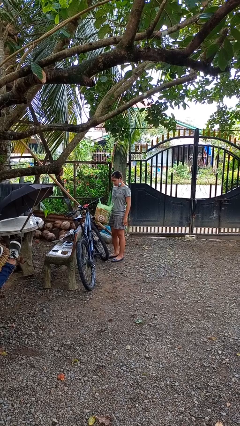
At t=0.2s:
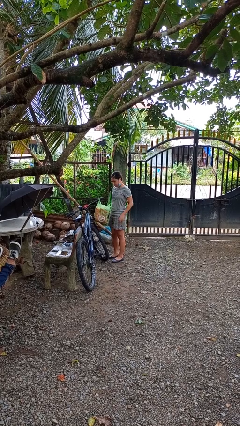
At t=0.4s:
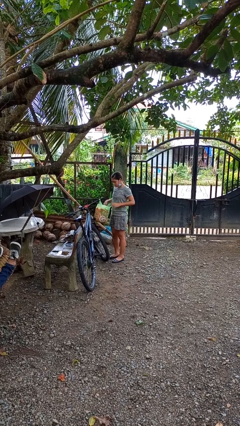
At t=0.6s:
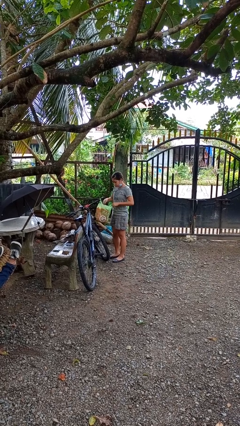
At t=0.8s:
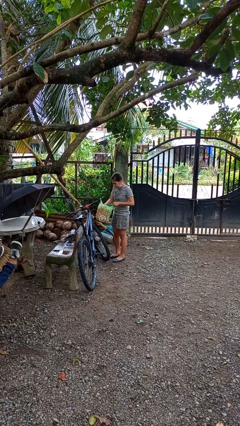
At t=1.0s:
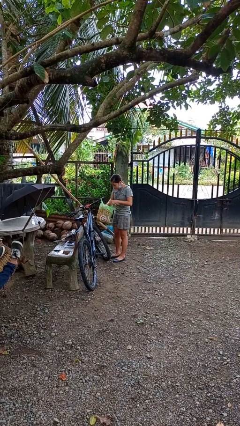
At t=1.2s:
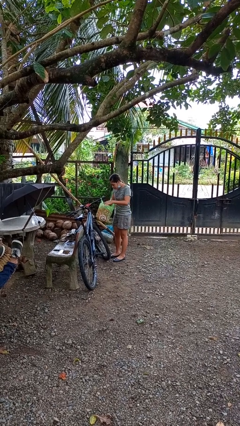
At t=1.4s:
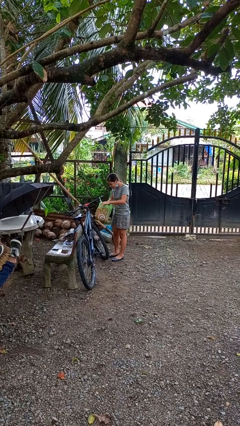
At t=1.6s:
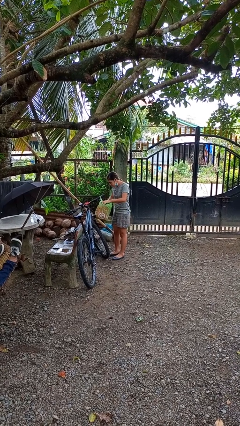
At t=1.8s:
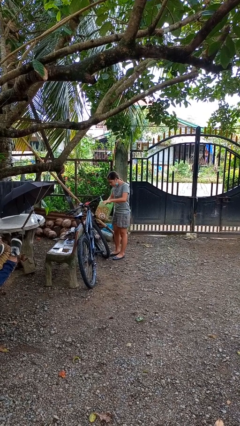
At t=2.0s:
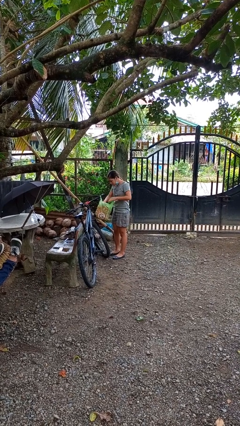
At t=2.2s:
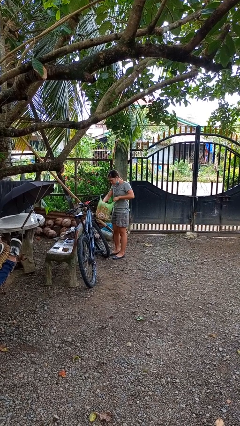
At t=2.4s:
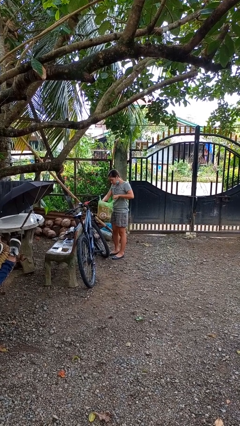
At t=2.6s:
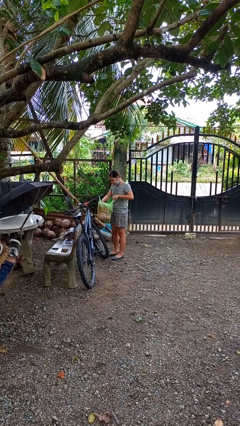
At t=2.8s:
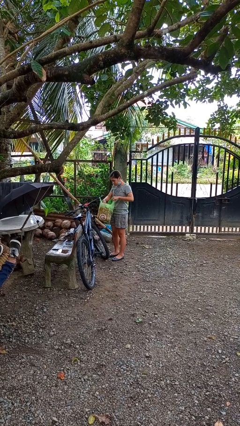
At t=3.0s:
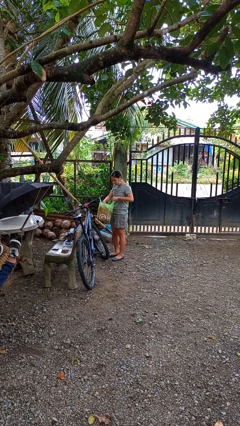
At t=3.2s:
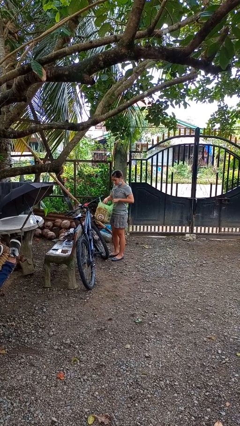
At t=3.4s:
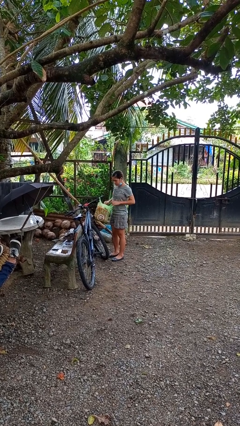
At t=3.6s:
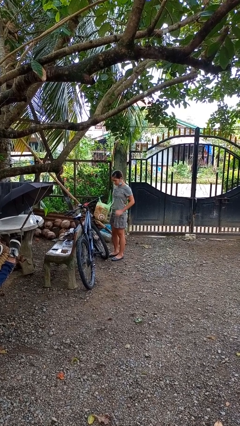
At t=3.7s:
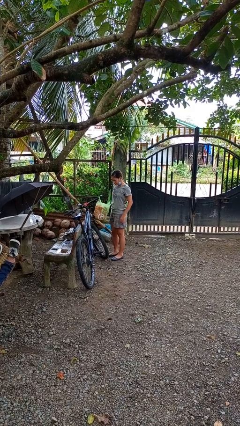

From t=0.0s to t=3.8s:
person searches in bag

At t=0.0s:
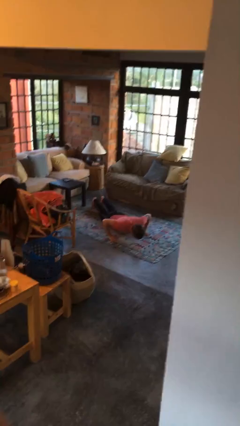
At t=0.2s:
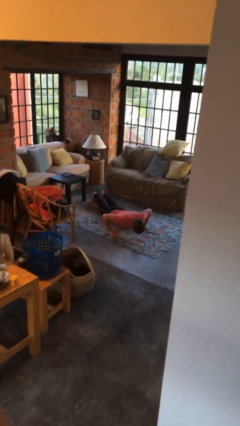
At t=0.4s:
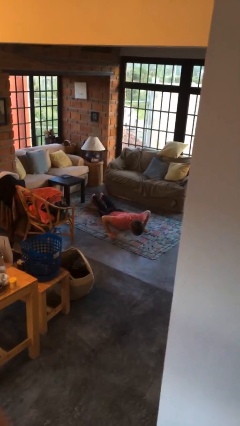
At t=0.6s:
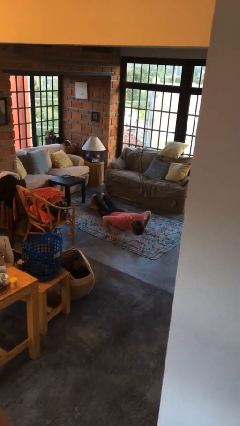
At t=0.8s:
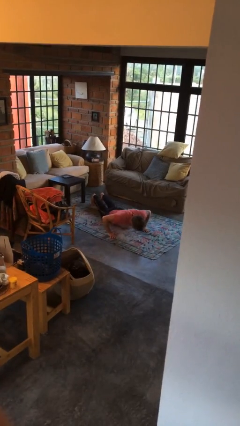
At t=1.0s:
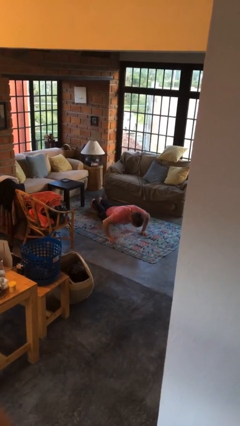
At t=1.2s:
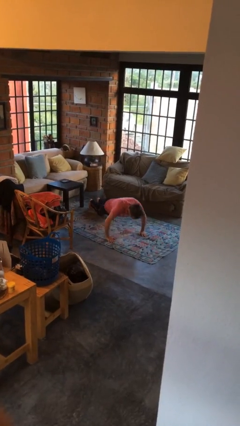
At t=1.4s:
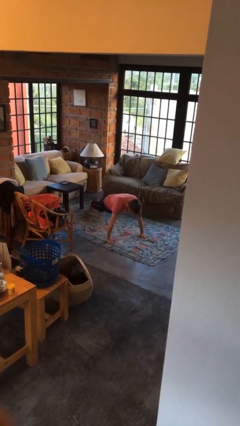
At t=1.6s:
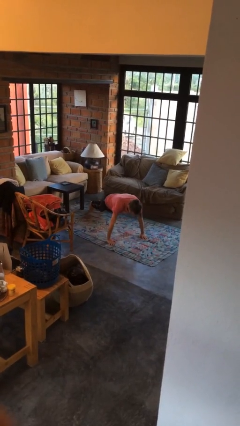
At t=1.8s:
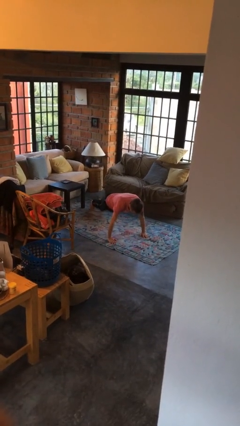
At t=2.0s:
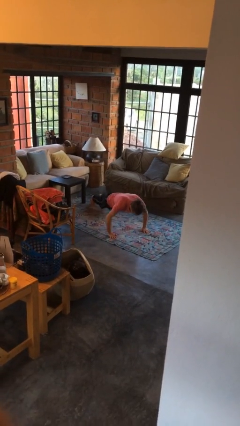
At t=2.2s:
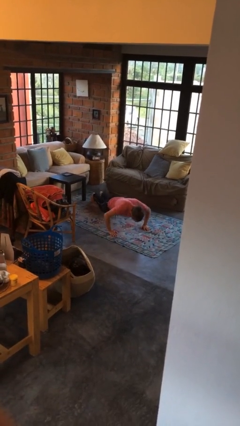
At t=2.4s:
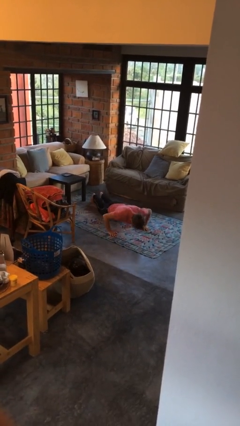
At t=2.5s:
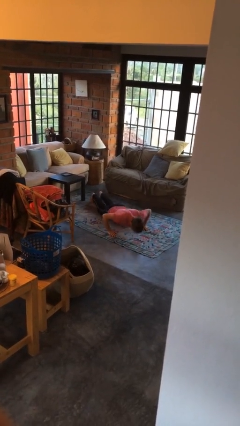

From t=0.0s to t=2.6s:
person exercises with pushup

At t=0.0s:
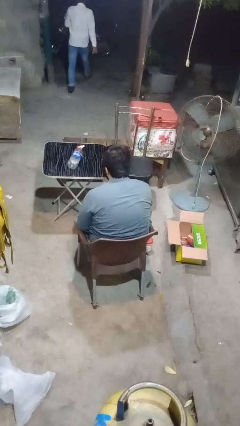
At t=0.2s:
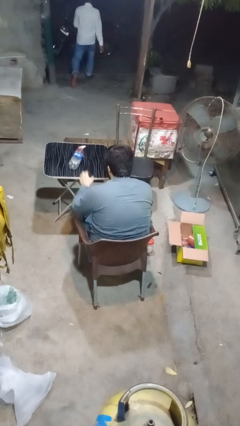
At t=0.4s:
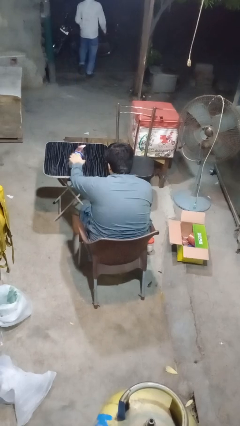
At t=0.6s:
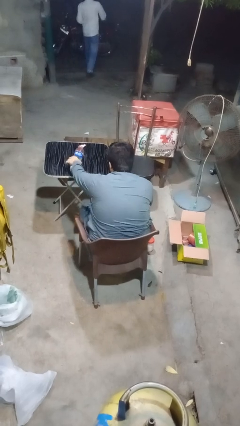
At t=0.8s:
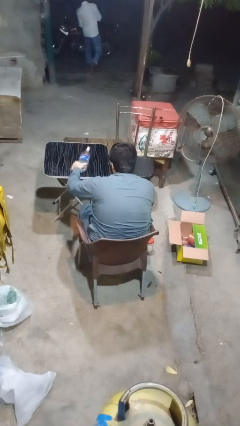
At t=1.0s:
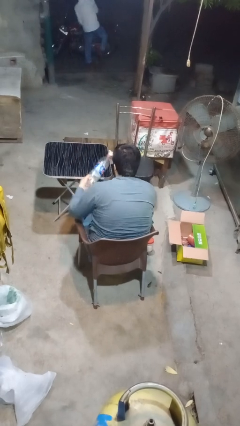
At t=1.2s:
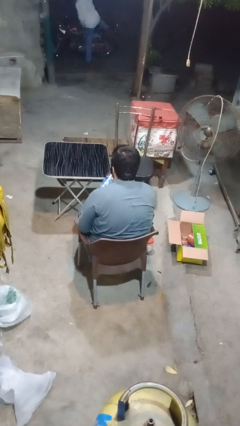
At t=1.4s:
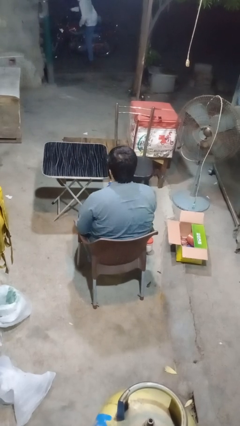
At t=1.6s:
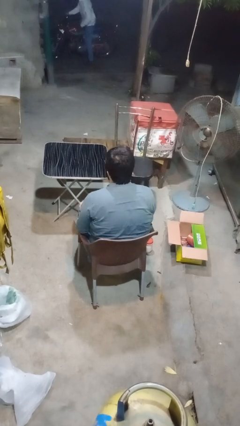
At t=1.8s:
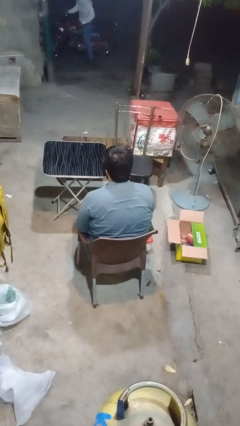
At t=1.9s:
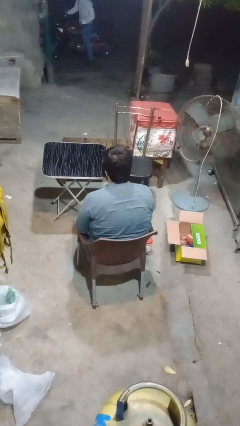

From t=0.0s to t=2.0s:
person picks up object from table

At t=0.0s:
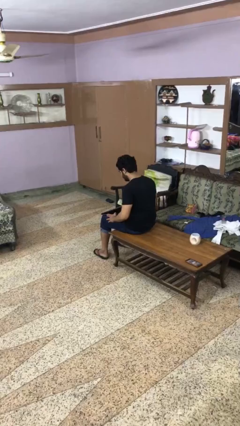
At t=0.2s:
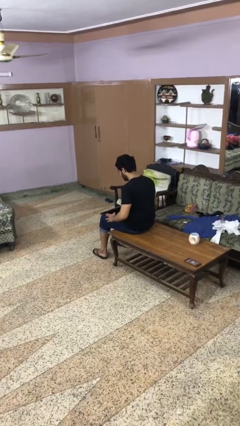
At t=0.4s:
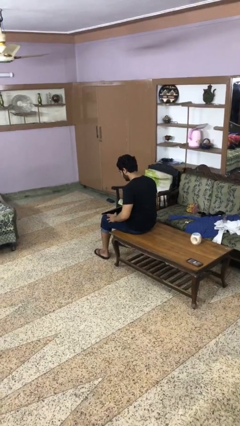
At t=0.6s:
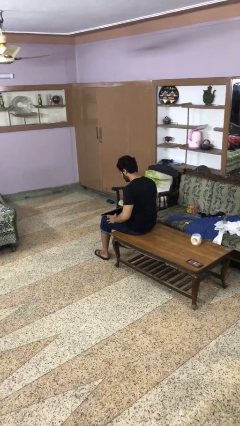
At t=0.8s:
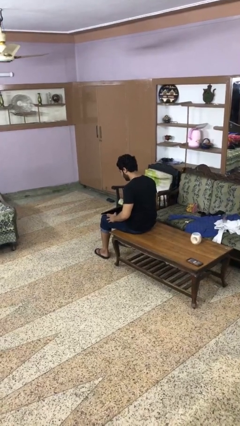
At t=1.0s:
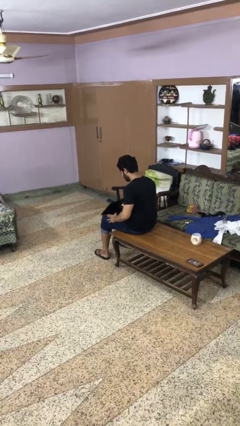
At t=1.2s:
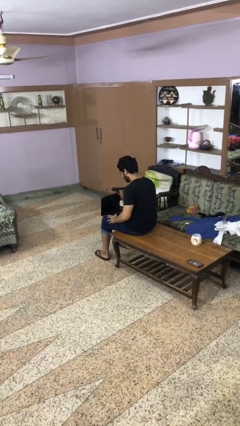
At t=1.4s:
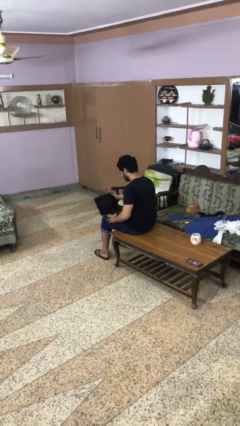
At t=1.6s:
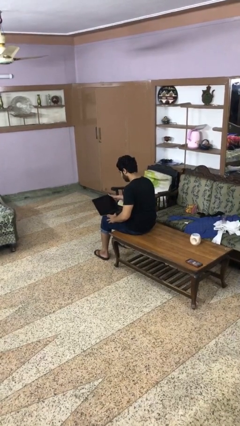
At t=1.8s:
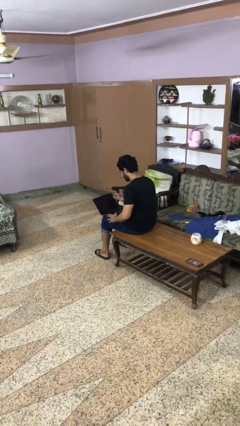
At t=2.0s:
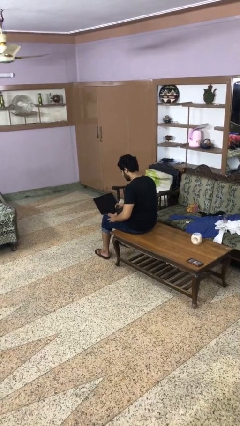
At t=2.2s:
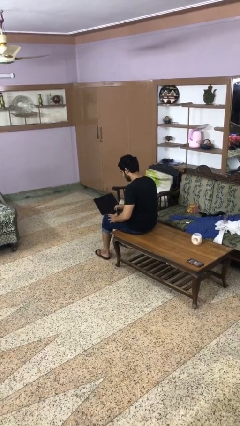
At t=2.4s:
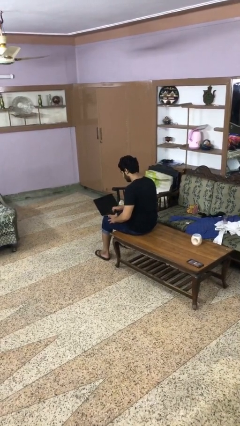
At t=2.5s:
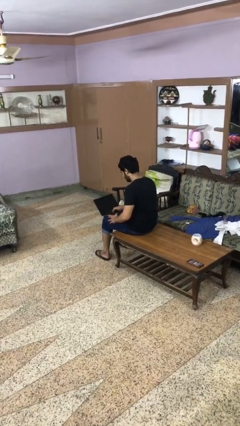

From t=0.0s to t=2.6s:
person opens laptop

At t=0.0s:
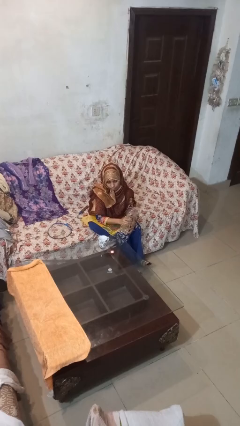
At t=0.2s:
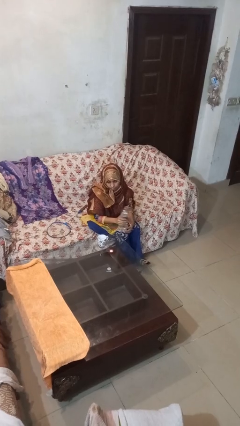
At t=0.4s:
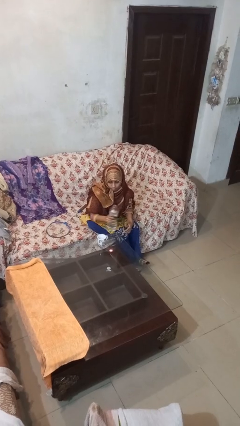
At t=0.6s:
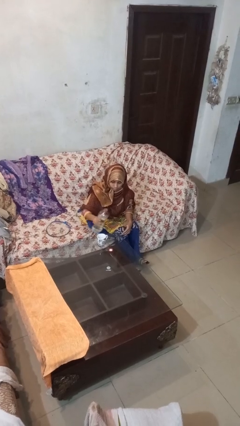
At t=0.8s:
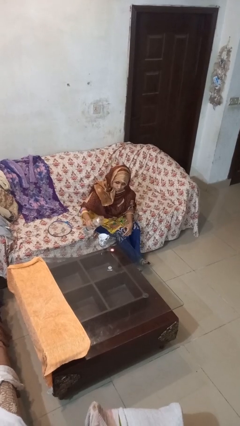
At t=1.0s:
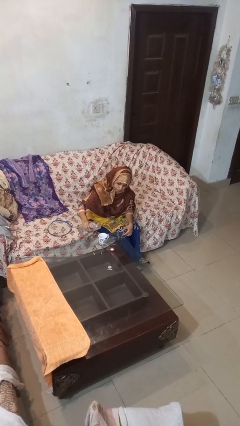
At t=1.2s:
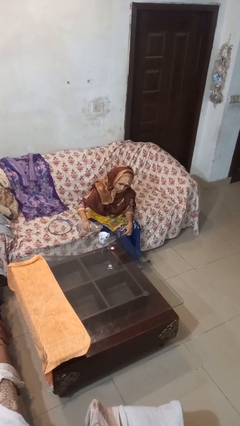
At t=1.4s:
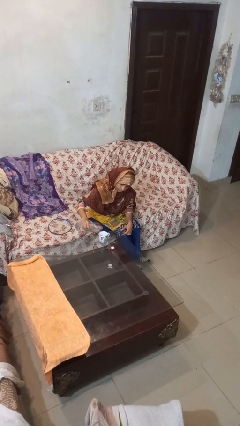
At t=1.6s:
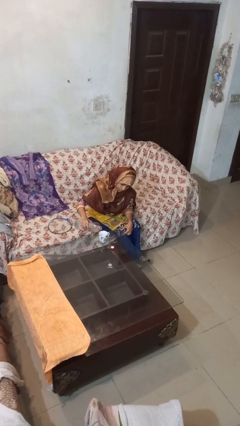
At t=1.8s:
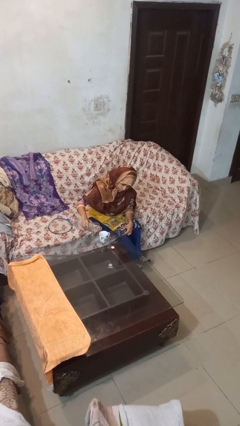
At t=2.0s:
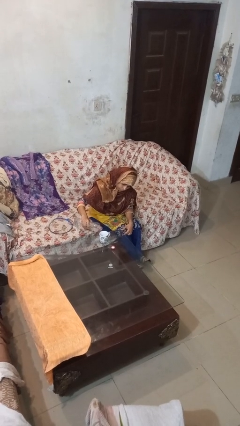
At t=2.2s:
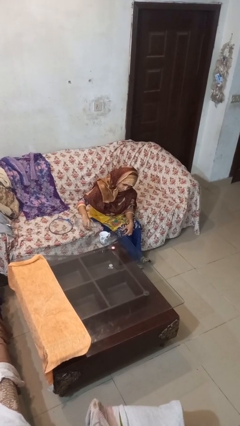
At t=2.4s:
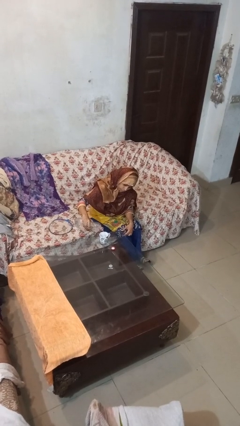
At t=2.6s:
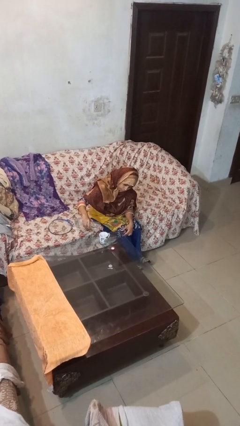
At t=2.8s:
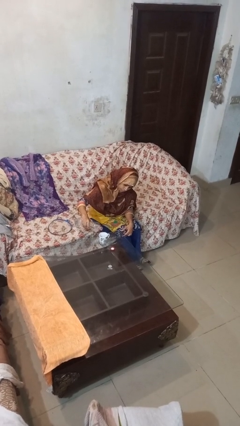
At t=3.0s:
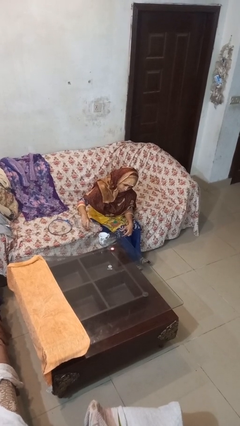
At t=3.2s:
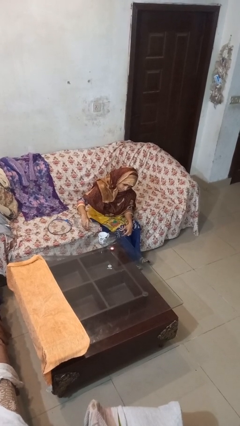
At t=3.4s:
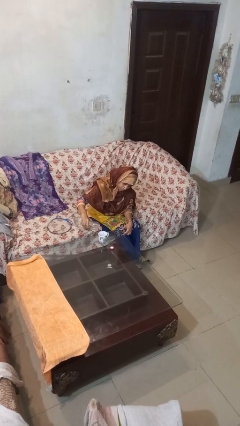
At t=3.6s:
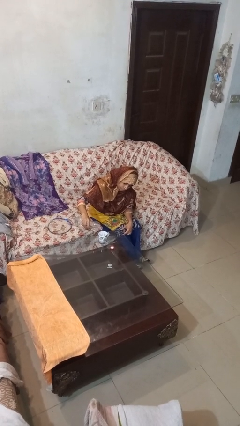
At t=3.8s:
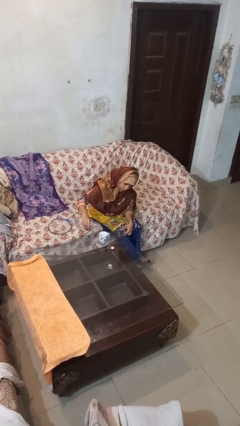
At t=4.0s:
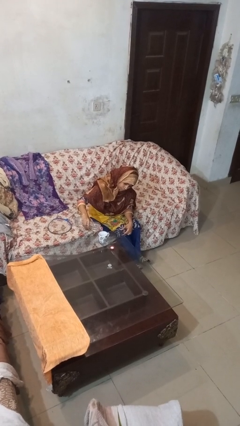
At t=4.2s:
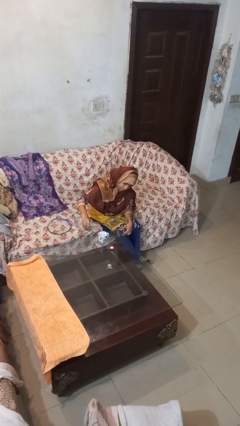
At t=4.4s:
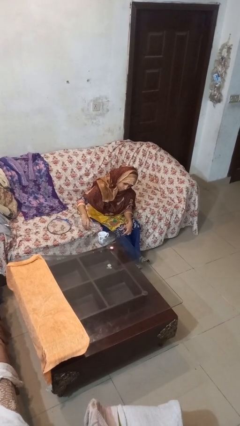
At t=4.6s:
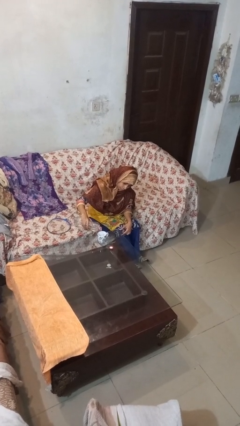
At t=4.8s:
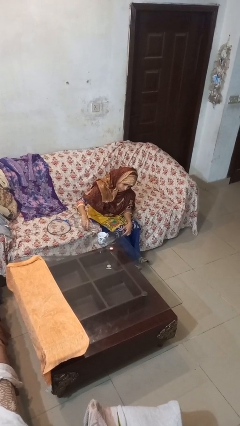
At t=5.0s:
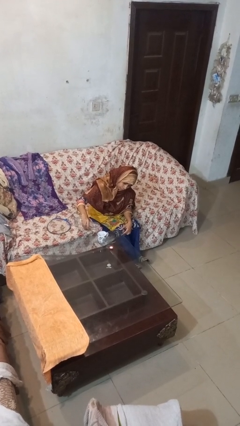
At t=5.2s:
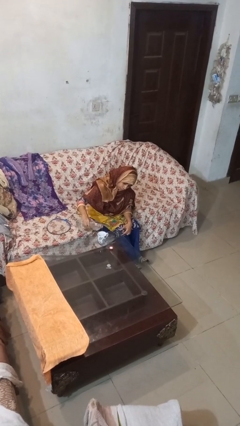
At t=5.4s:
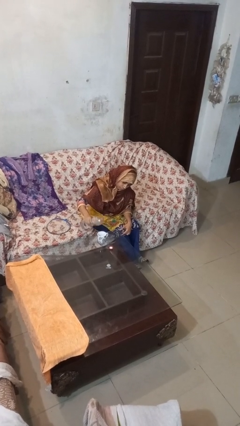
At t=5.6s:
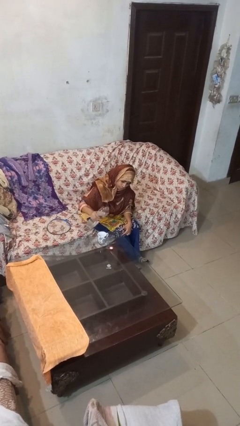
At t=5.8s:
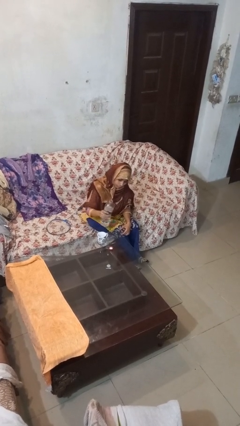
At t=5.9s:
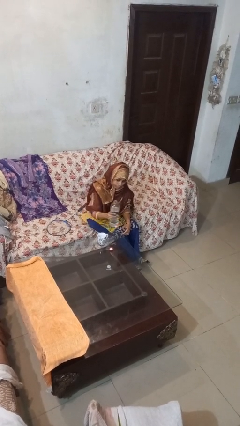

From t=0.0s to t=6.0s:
person pours liquid into cup

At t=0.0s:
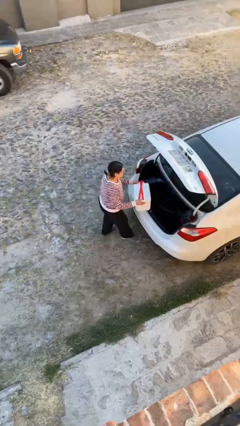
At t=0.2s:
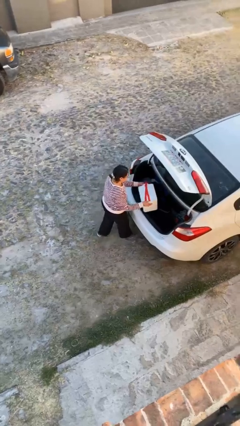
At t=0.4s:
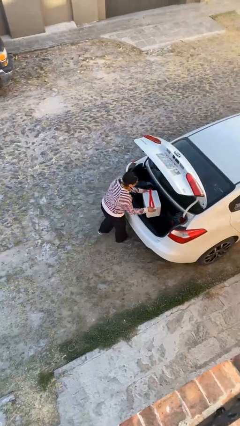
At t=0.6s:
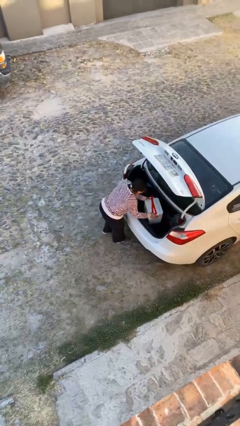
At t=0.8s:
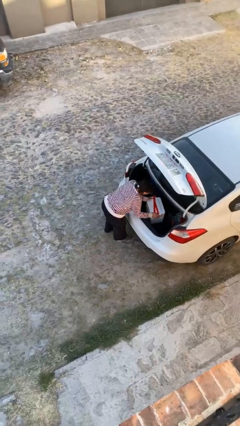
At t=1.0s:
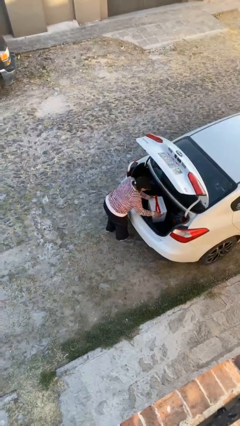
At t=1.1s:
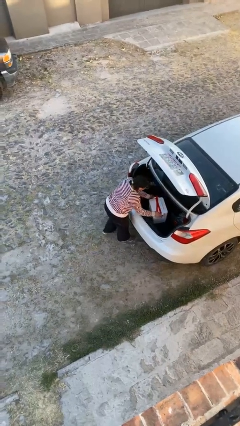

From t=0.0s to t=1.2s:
person loads car
